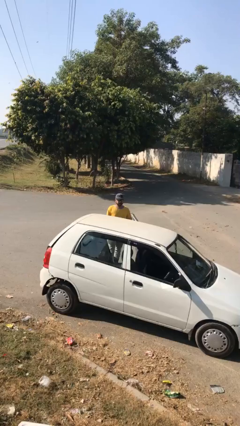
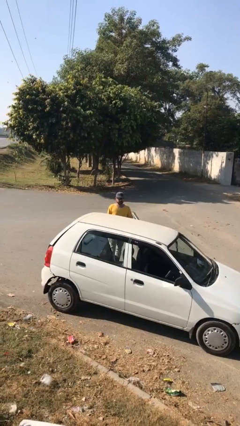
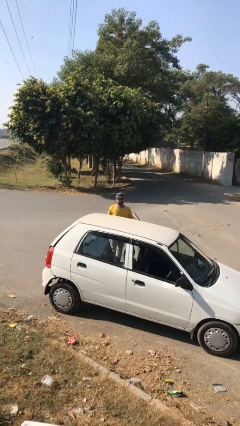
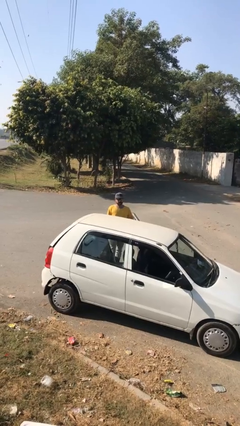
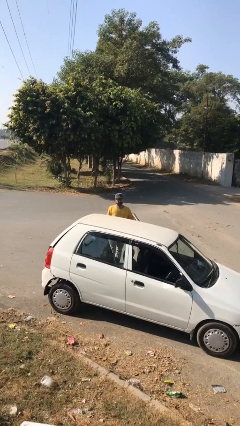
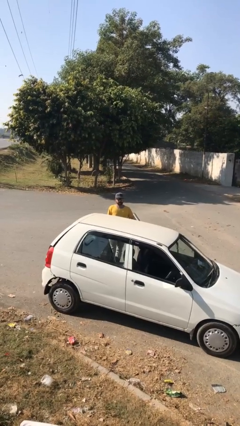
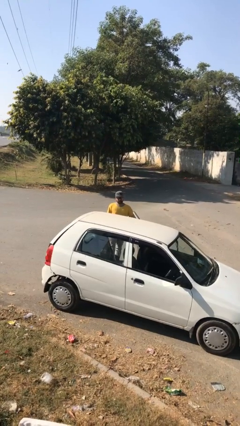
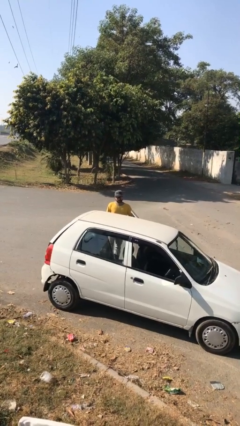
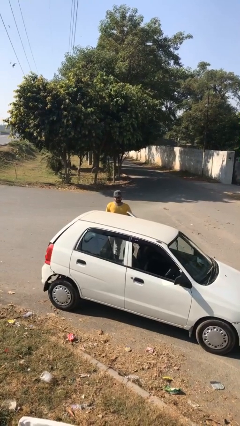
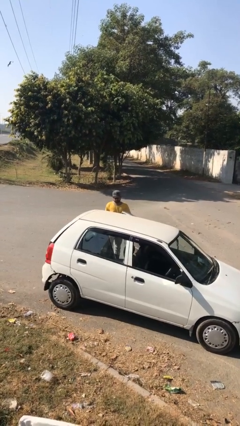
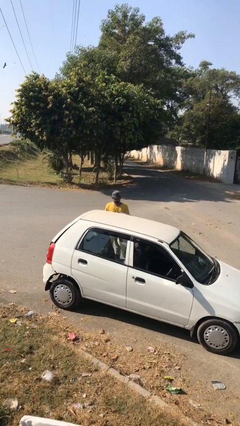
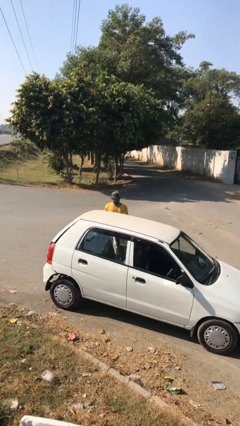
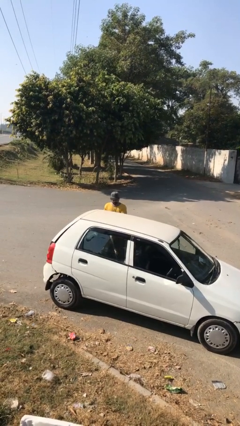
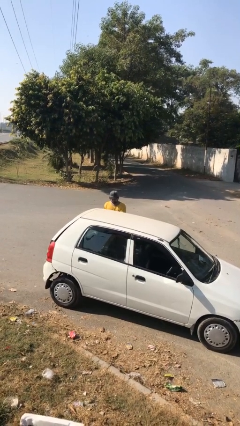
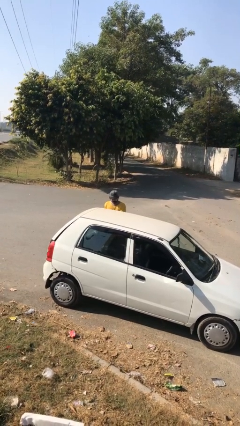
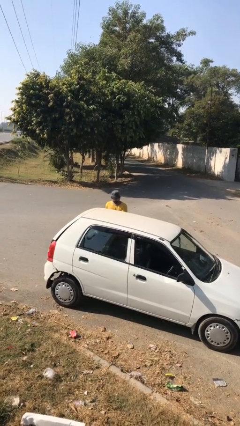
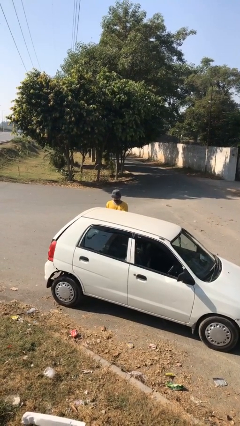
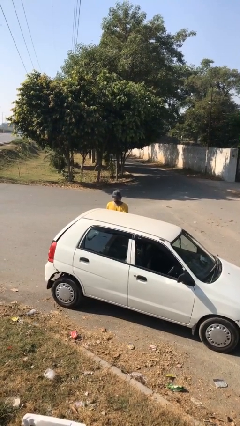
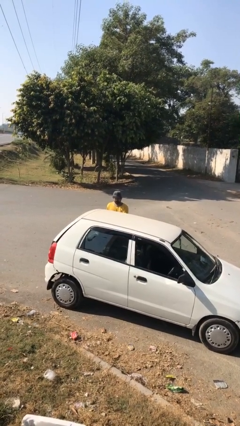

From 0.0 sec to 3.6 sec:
person closes car door

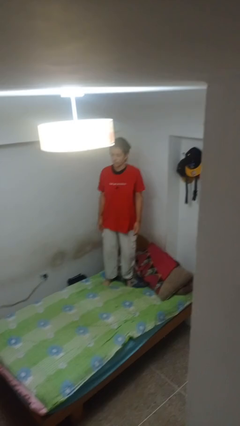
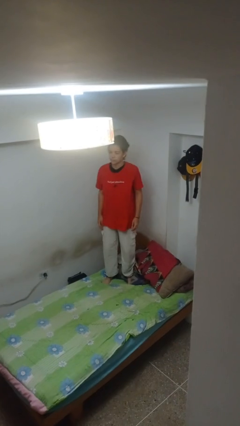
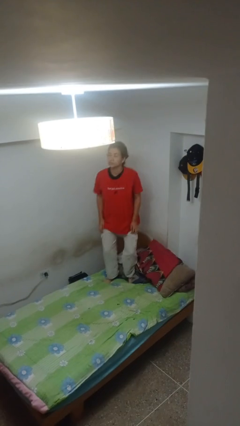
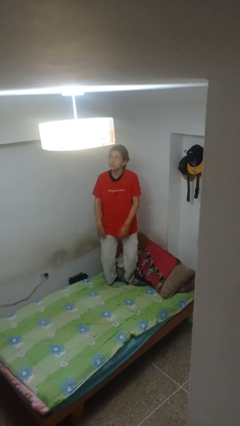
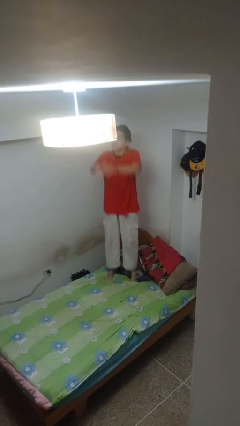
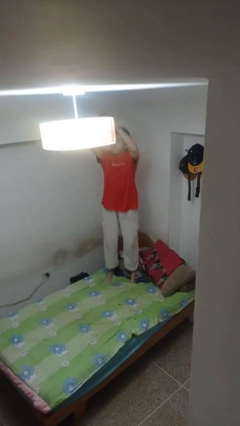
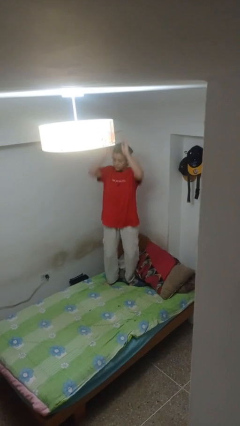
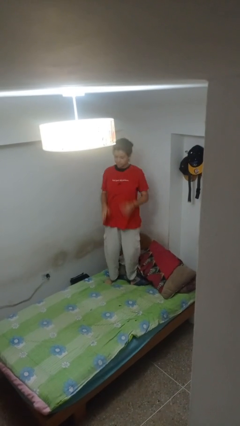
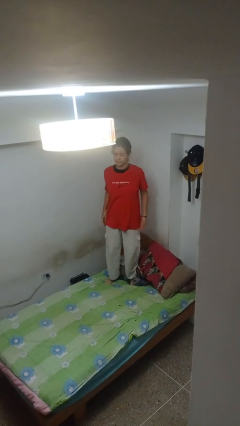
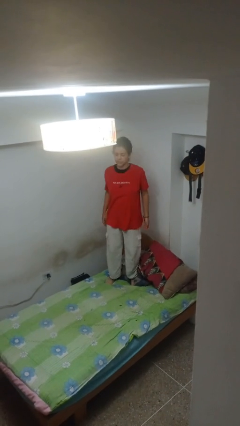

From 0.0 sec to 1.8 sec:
person jumps on bed

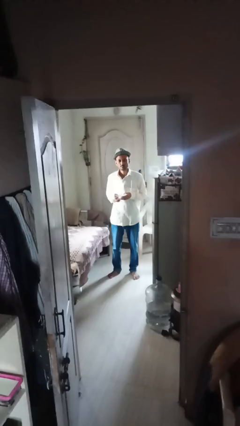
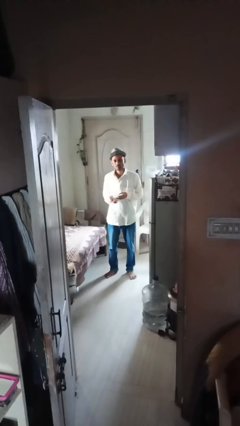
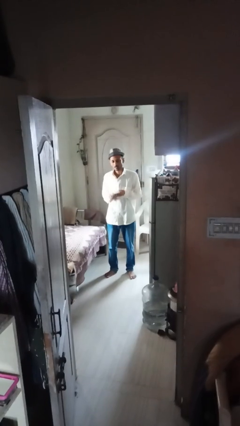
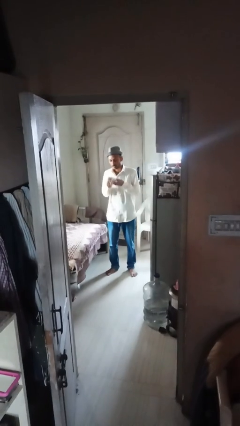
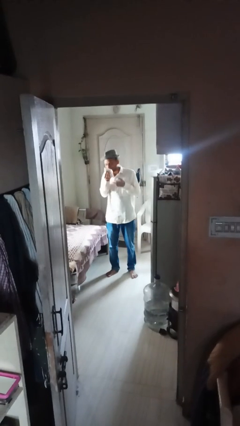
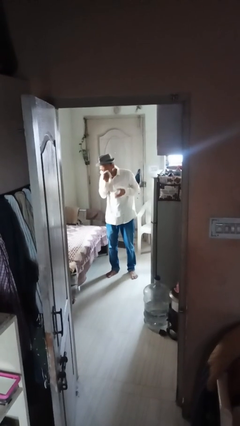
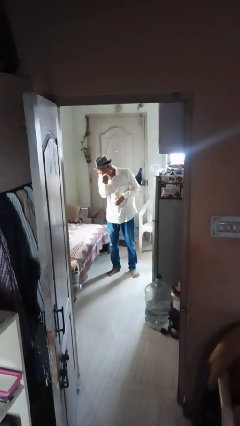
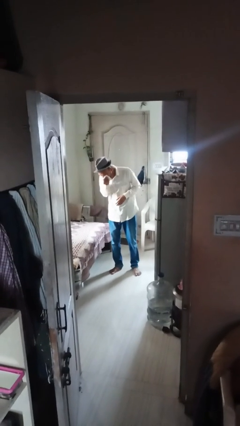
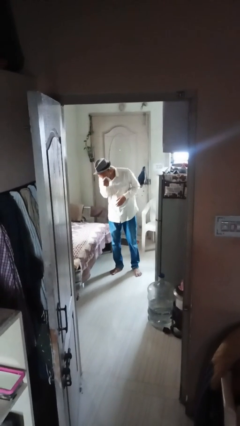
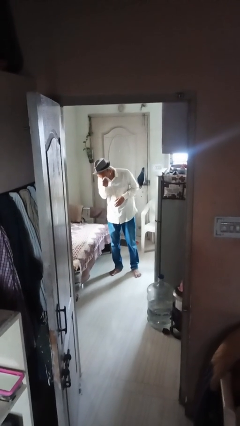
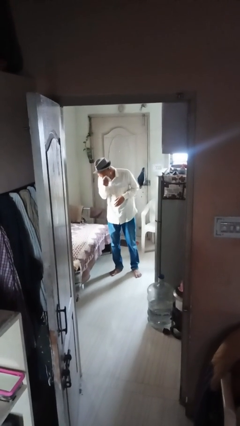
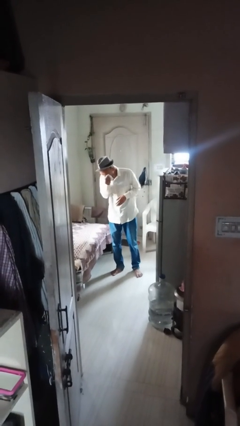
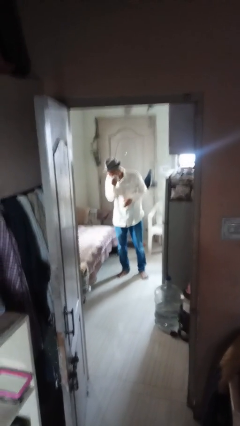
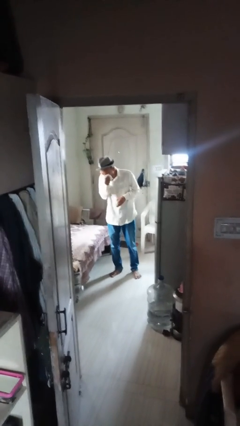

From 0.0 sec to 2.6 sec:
person blows nose

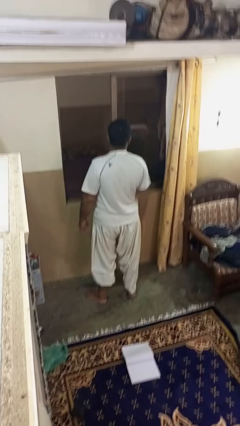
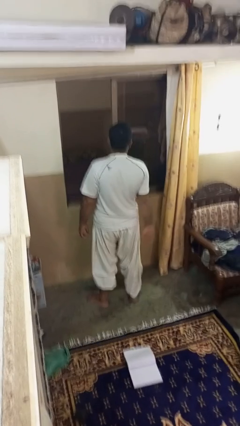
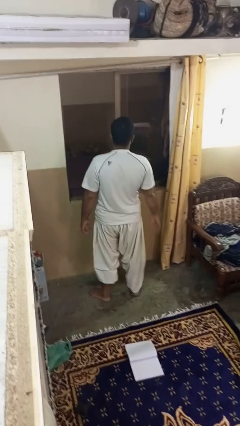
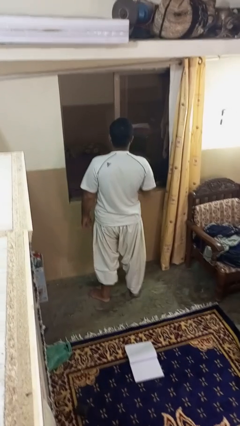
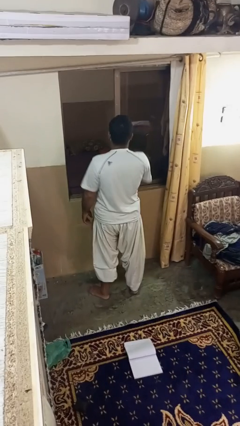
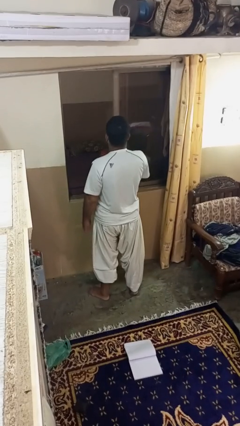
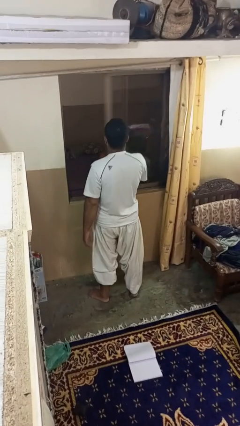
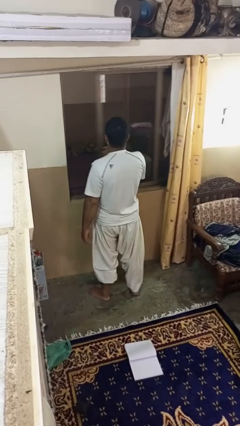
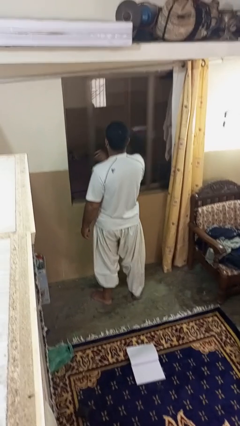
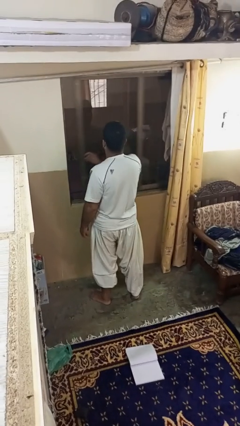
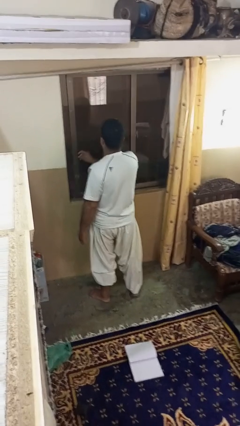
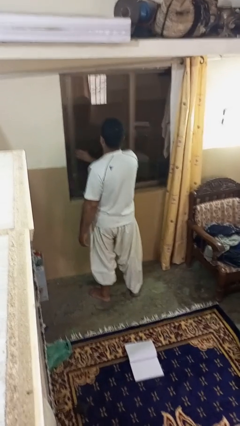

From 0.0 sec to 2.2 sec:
person closes home window

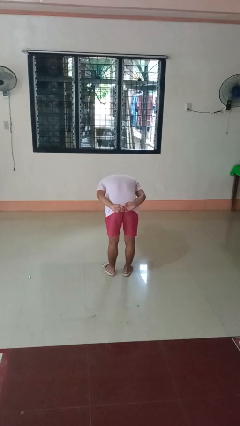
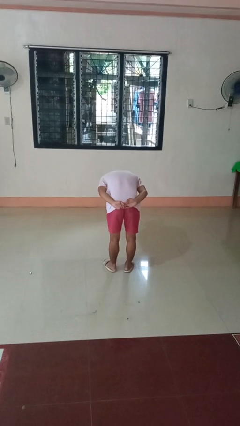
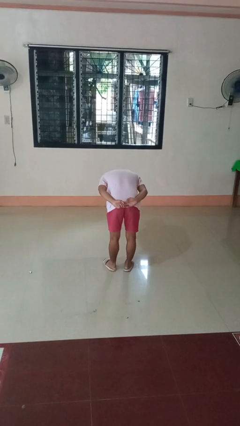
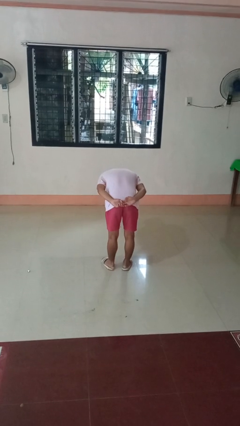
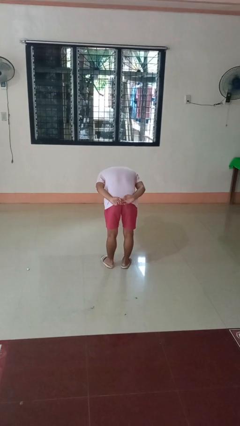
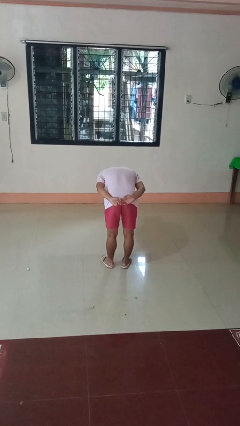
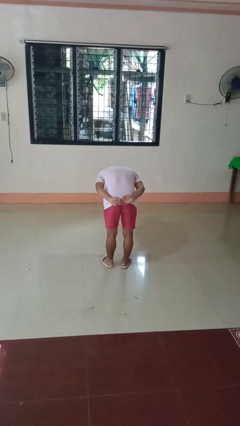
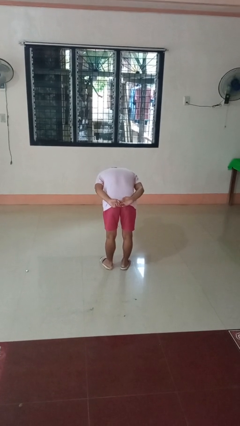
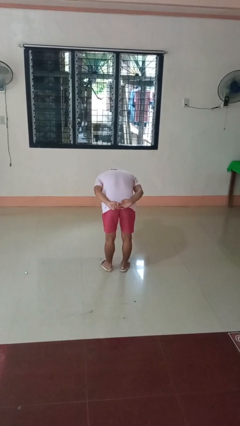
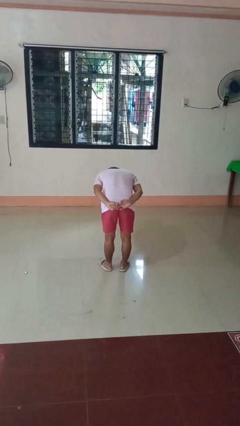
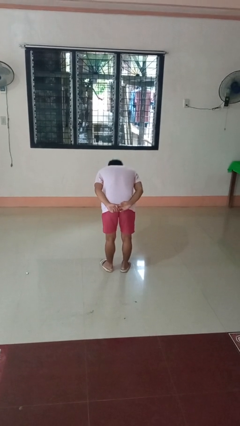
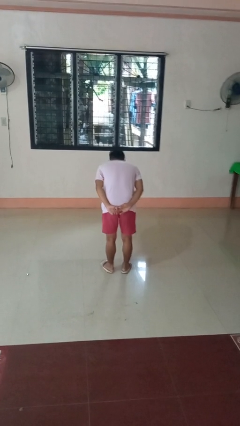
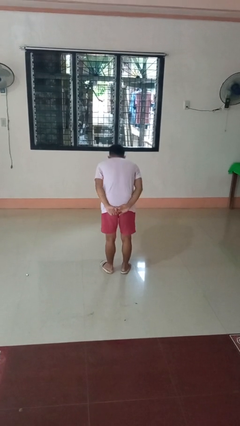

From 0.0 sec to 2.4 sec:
person bows

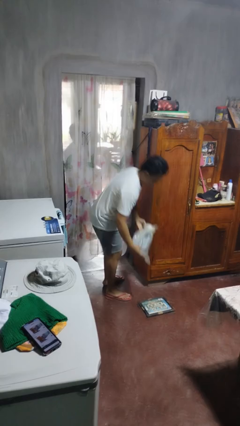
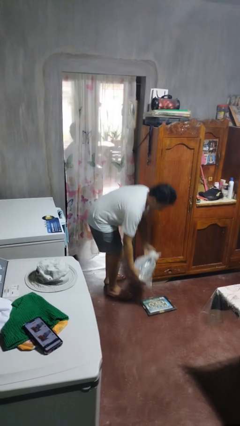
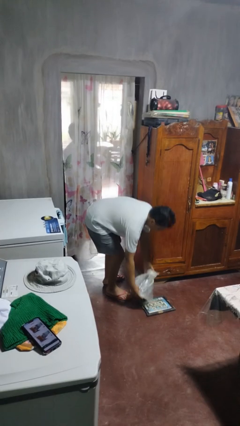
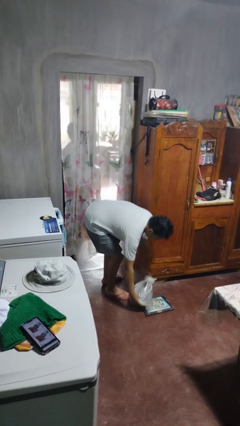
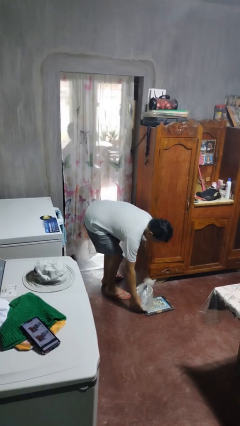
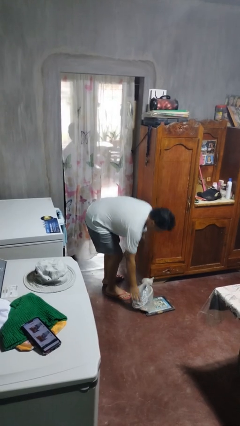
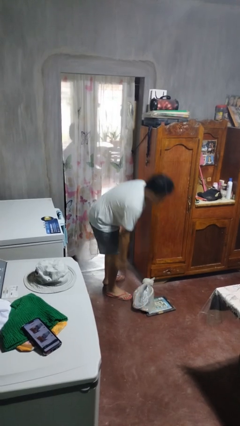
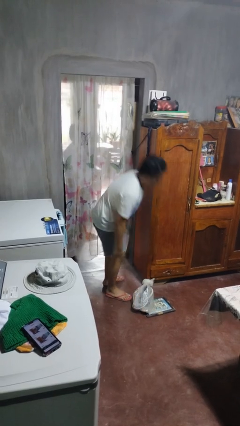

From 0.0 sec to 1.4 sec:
person puts down object on shelf

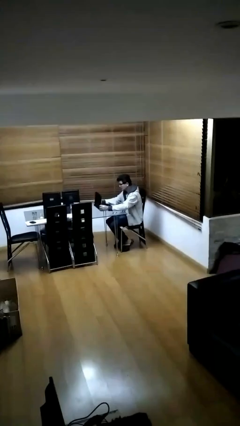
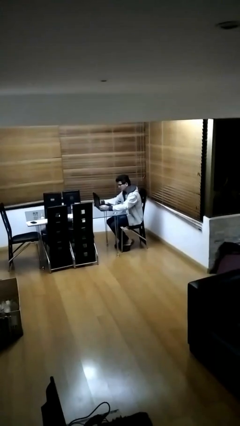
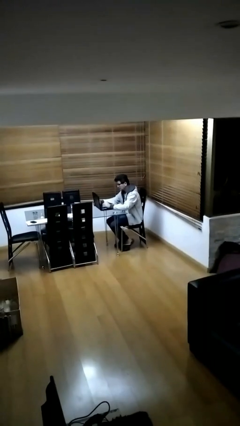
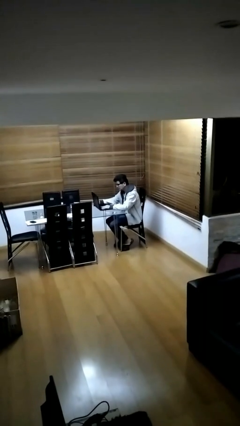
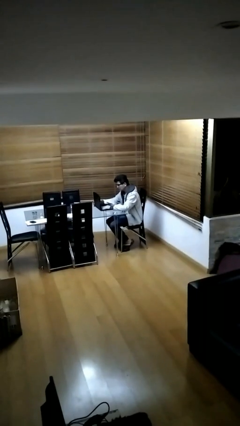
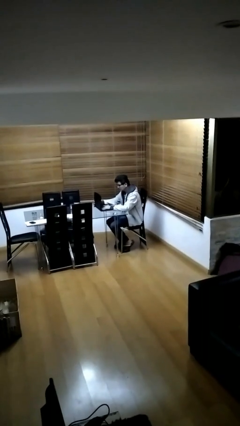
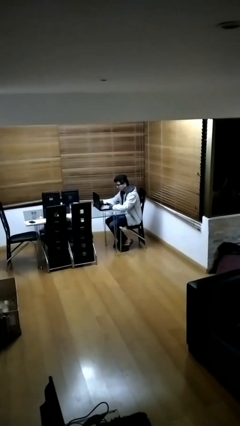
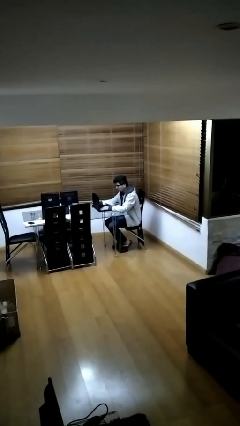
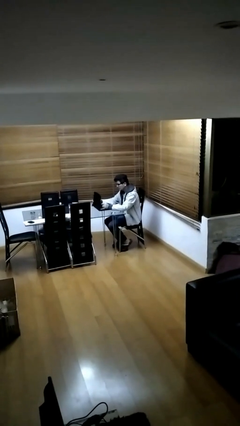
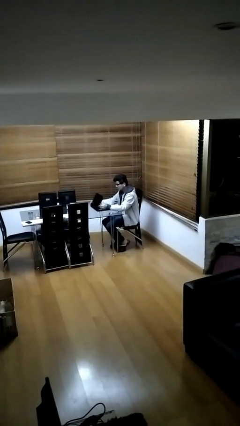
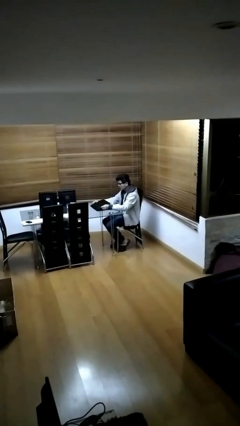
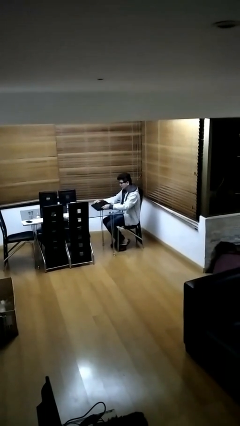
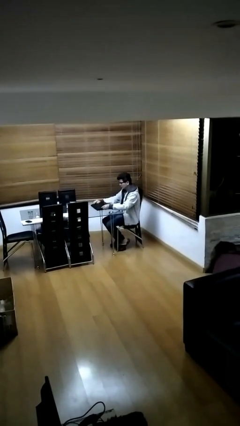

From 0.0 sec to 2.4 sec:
person interacts with laptop

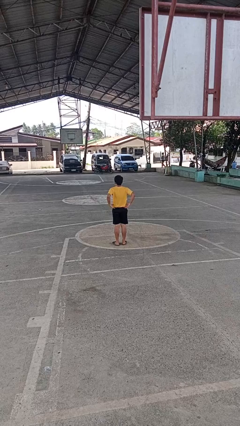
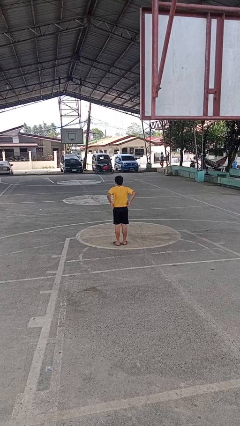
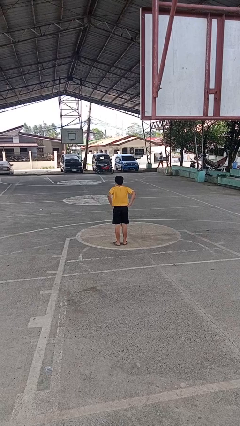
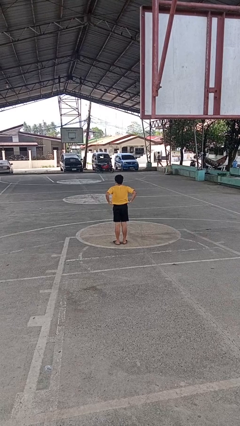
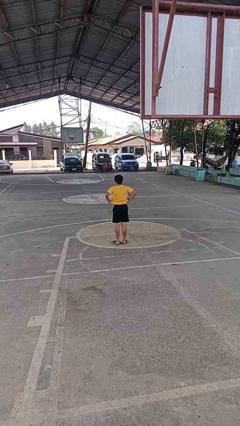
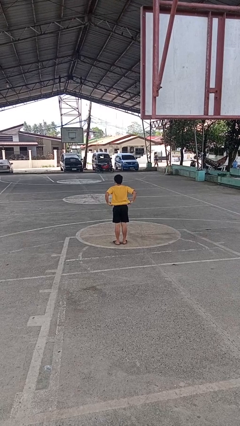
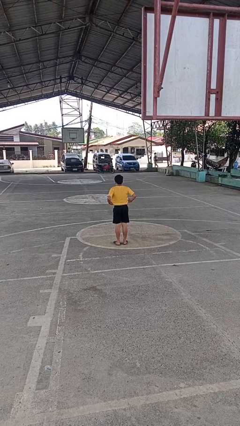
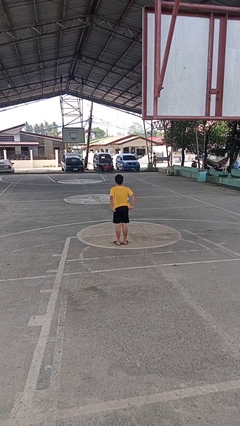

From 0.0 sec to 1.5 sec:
person untucks shirt
